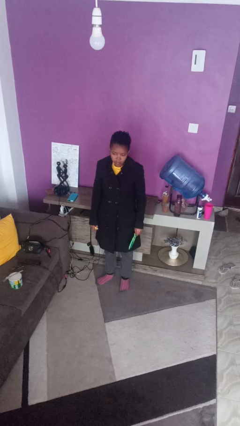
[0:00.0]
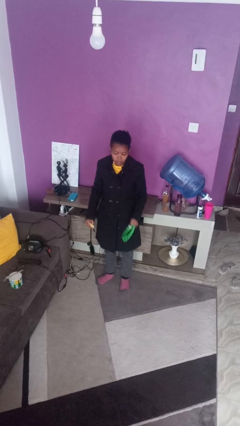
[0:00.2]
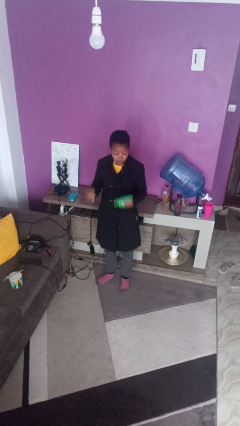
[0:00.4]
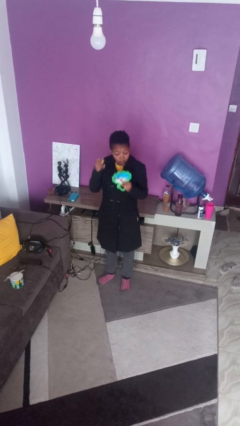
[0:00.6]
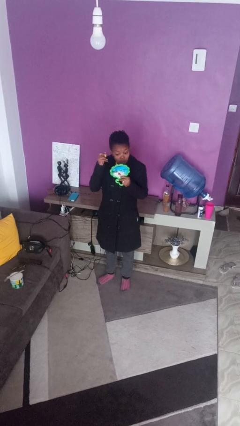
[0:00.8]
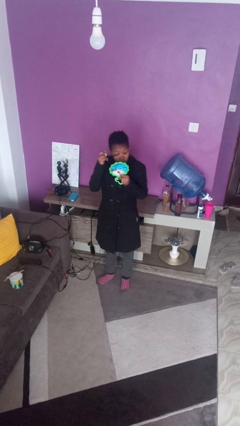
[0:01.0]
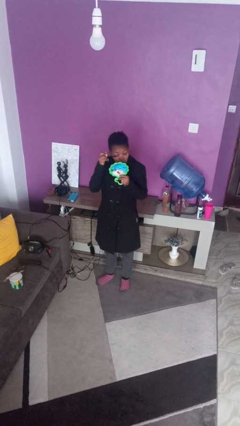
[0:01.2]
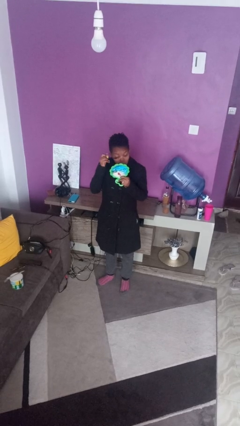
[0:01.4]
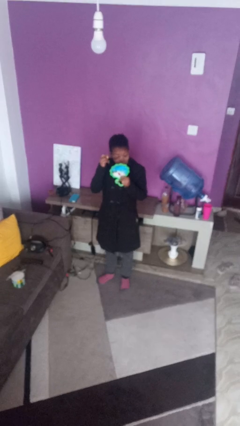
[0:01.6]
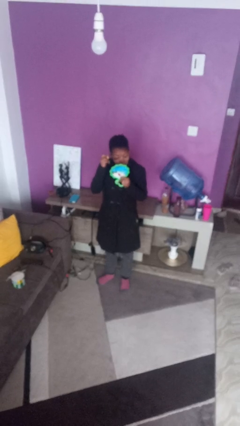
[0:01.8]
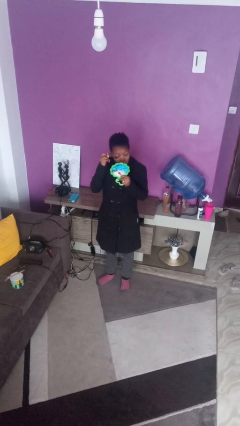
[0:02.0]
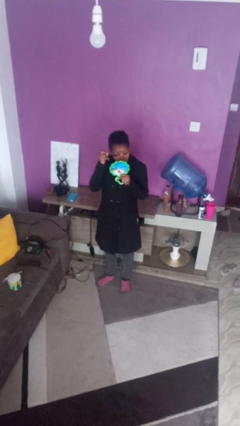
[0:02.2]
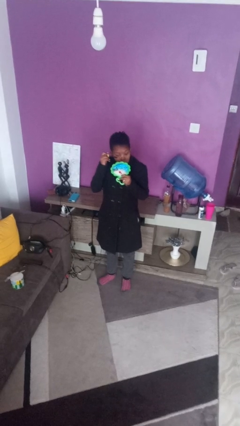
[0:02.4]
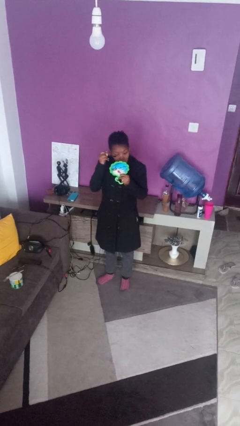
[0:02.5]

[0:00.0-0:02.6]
person applies eye makeup

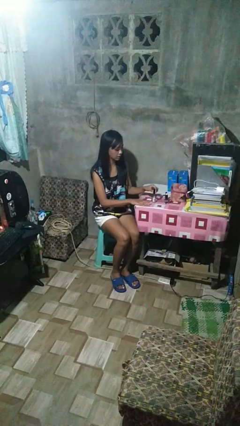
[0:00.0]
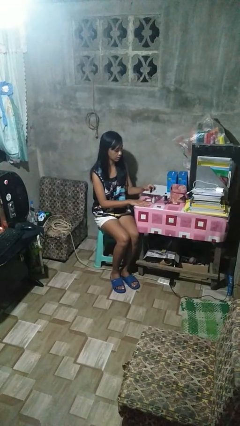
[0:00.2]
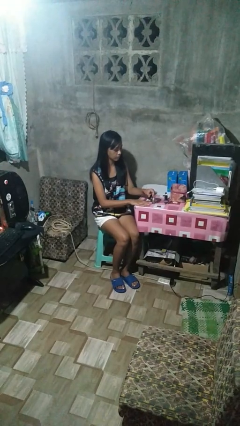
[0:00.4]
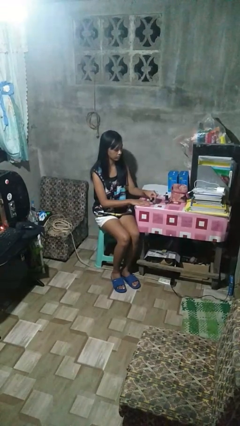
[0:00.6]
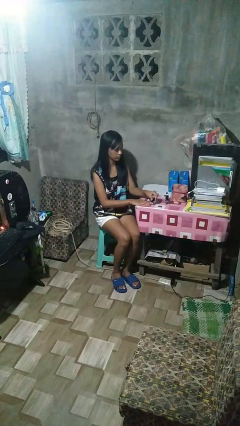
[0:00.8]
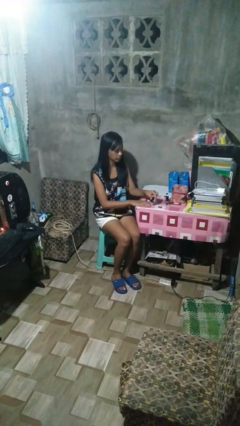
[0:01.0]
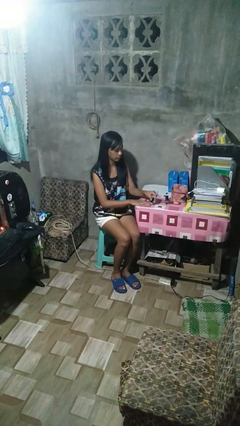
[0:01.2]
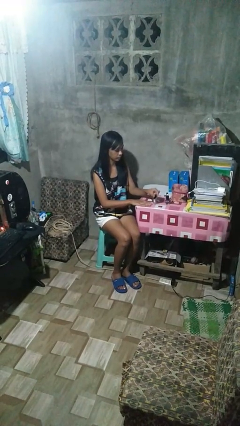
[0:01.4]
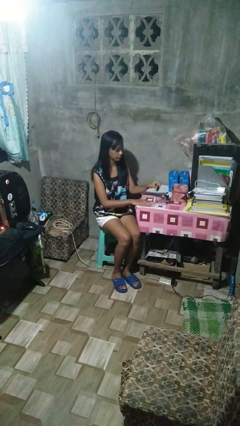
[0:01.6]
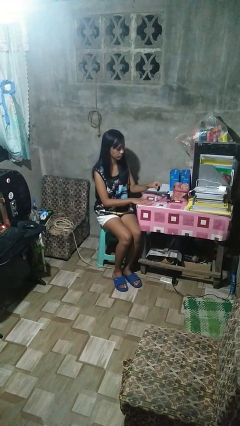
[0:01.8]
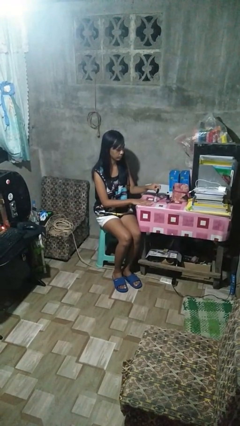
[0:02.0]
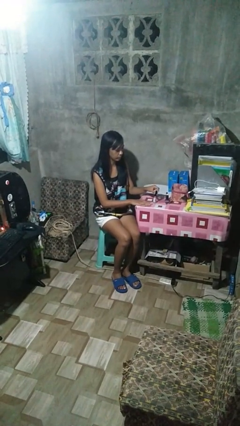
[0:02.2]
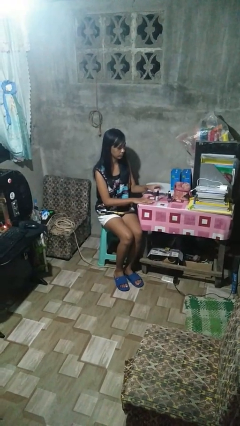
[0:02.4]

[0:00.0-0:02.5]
person paints fingernails

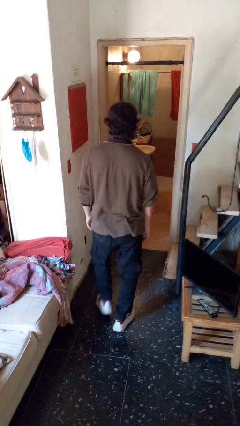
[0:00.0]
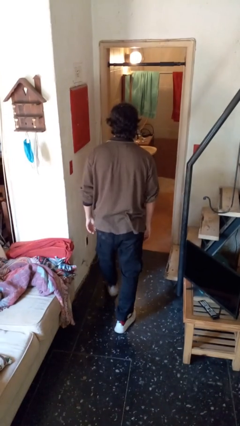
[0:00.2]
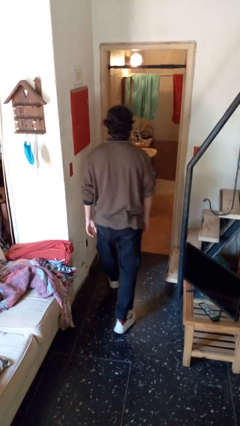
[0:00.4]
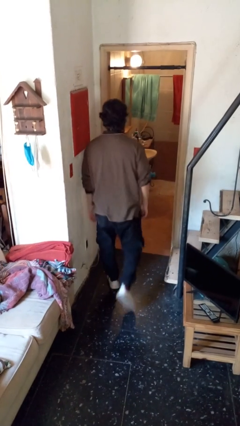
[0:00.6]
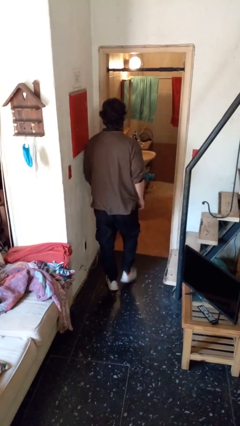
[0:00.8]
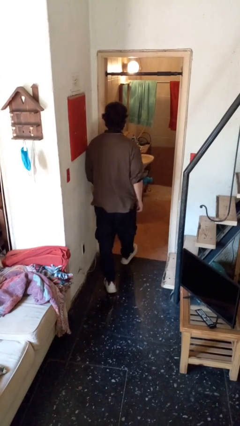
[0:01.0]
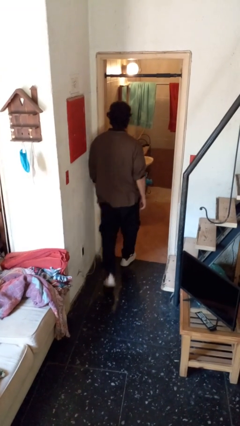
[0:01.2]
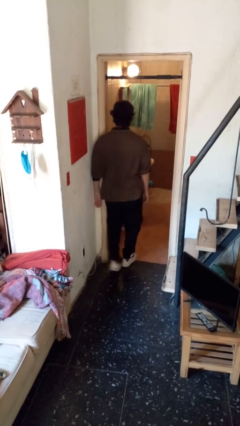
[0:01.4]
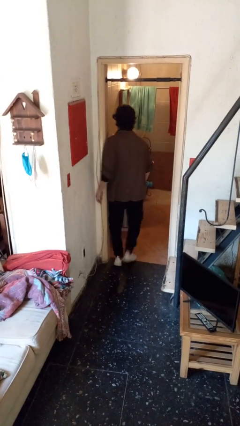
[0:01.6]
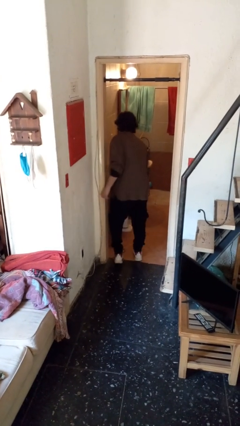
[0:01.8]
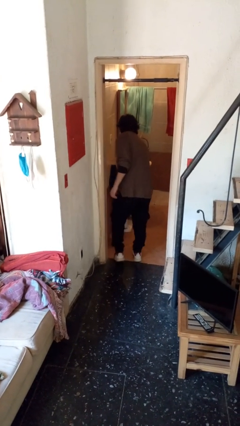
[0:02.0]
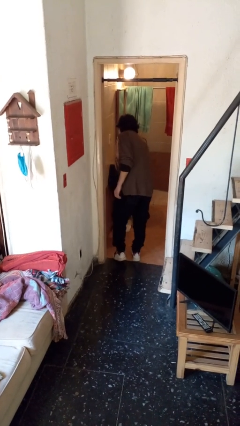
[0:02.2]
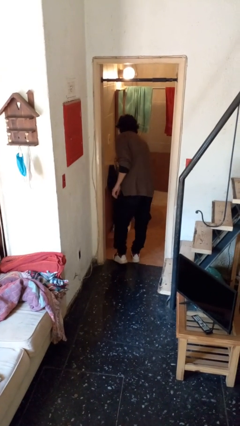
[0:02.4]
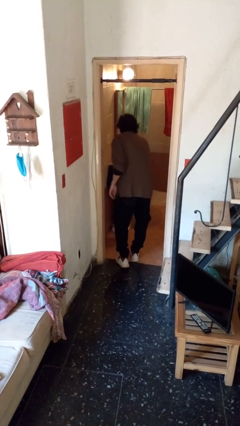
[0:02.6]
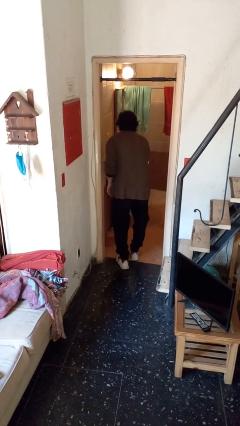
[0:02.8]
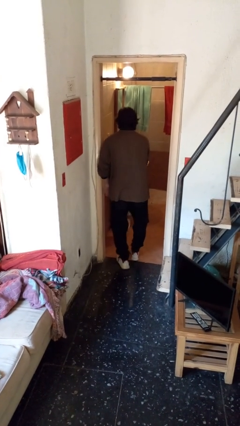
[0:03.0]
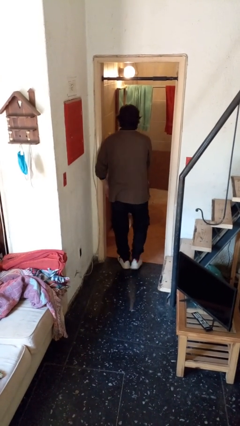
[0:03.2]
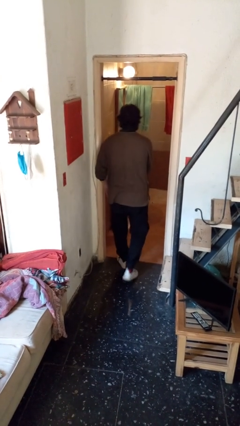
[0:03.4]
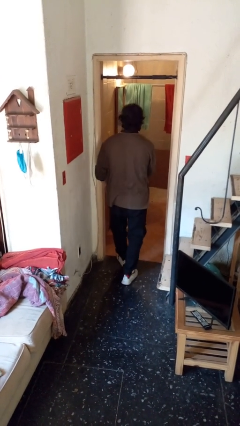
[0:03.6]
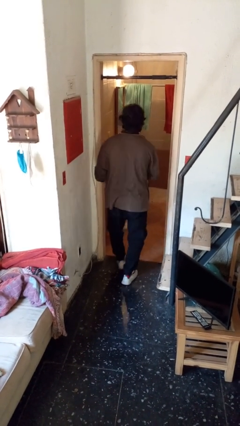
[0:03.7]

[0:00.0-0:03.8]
person bumps into wall

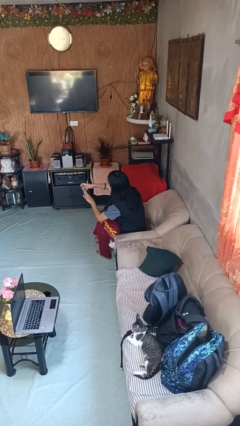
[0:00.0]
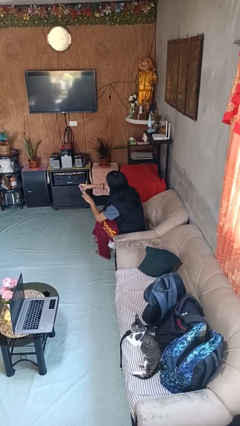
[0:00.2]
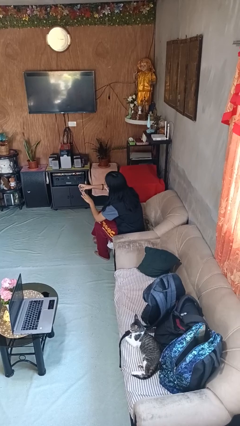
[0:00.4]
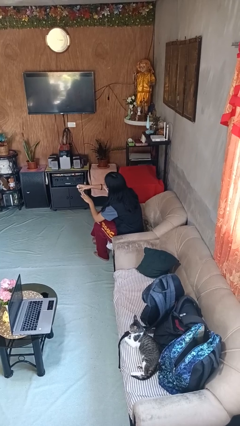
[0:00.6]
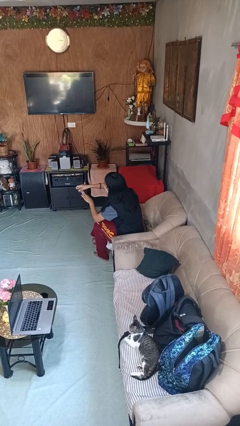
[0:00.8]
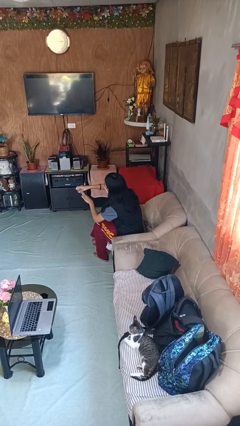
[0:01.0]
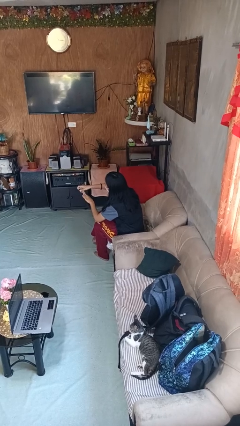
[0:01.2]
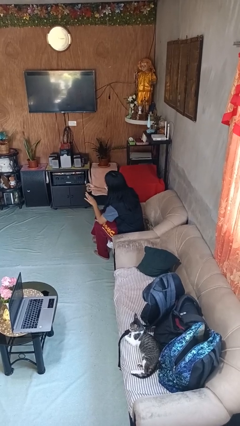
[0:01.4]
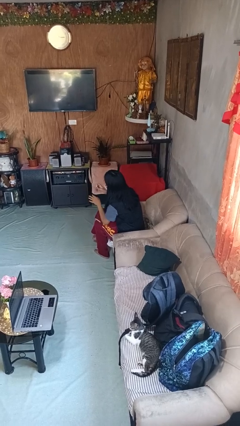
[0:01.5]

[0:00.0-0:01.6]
person clips fingernails

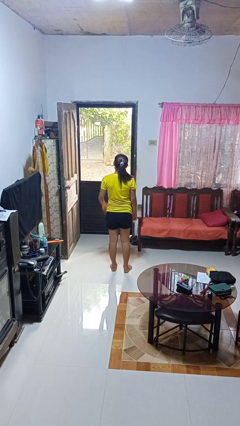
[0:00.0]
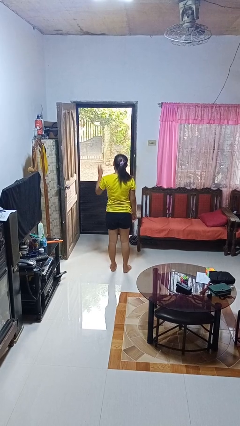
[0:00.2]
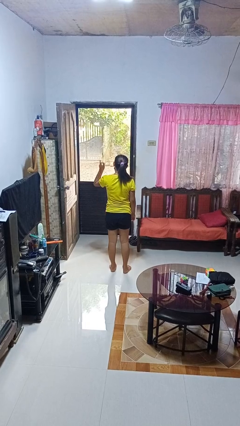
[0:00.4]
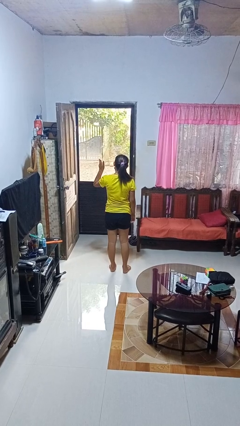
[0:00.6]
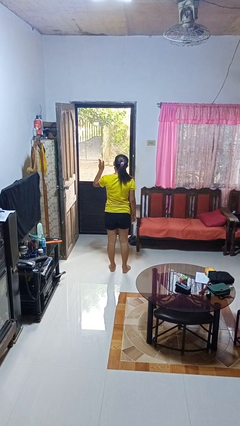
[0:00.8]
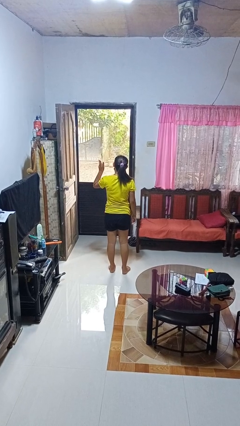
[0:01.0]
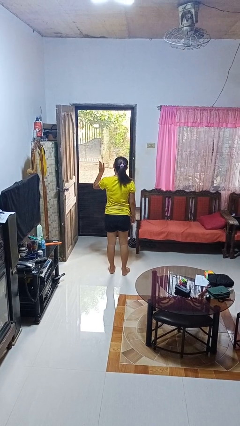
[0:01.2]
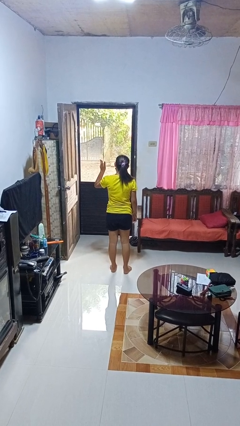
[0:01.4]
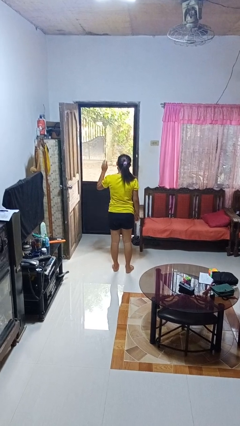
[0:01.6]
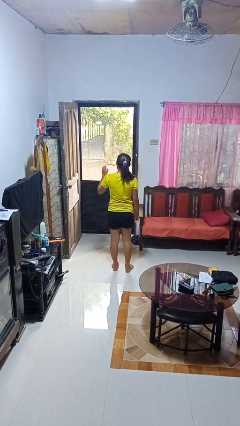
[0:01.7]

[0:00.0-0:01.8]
person gestures number three

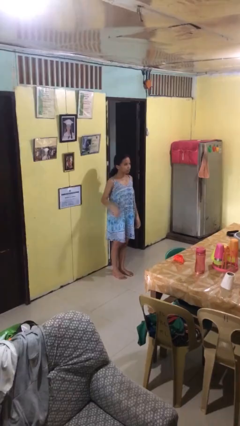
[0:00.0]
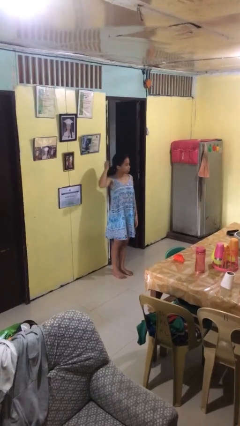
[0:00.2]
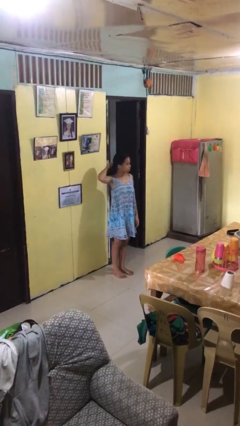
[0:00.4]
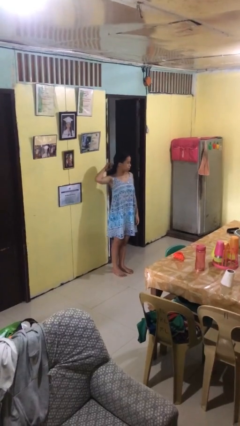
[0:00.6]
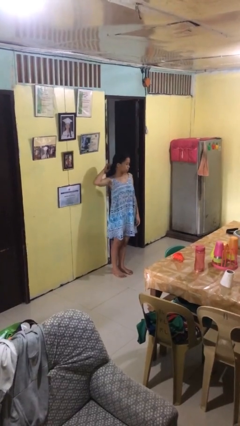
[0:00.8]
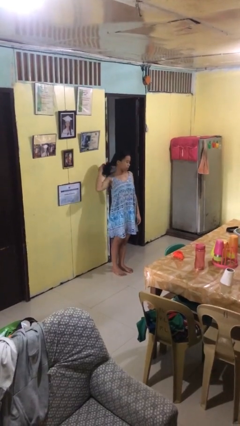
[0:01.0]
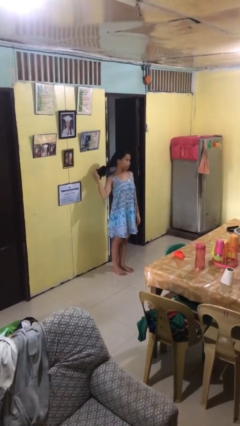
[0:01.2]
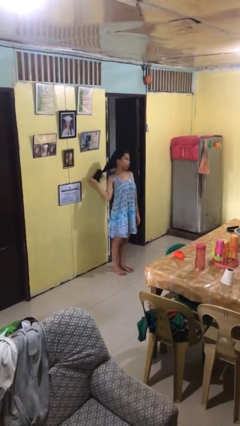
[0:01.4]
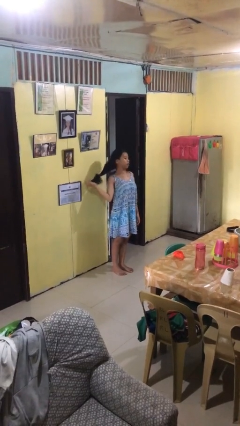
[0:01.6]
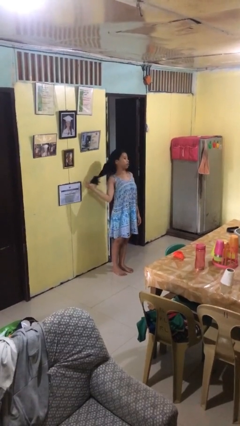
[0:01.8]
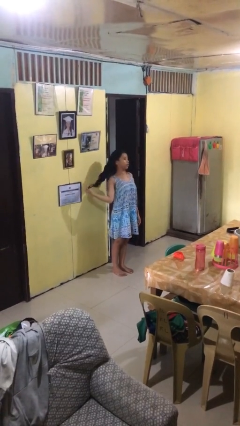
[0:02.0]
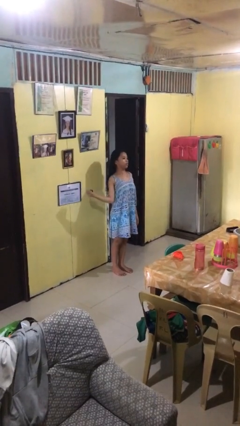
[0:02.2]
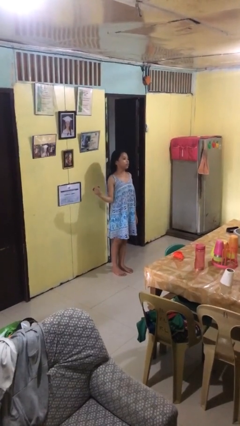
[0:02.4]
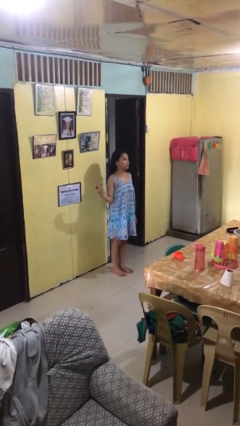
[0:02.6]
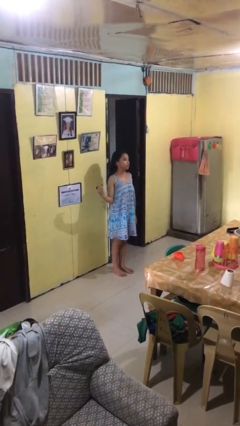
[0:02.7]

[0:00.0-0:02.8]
person takes off hairtie

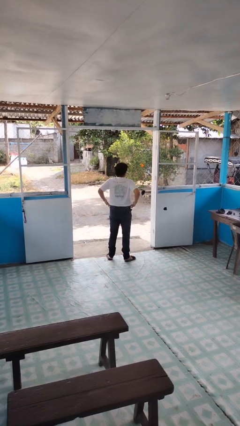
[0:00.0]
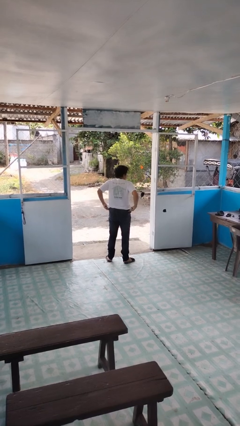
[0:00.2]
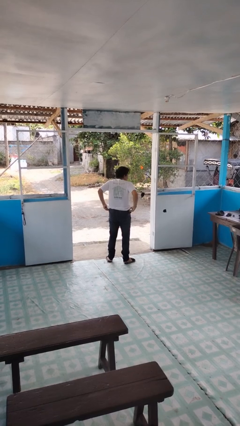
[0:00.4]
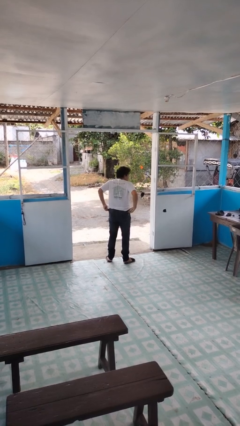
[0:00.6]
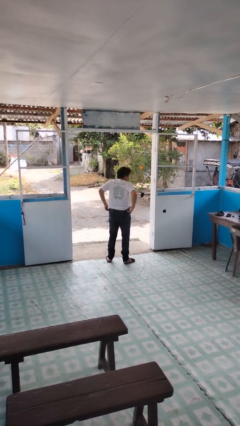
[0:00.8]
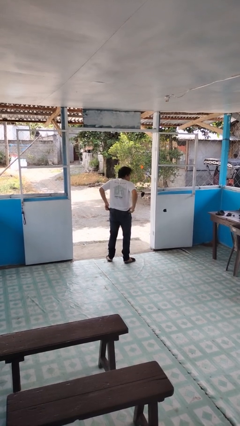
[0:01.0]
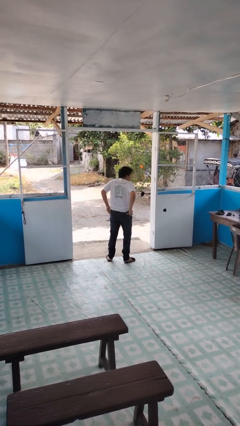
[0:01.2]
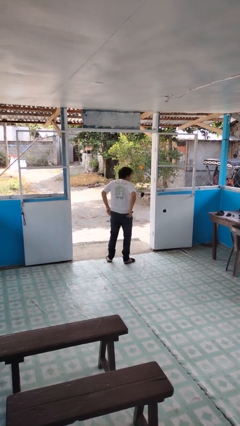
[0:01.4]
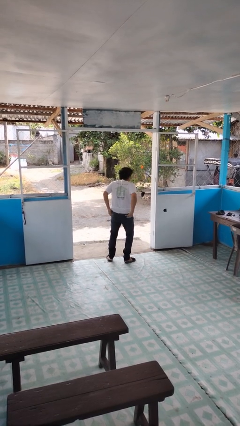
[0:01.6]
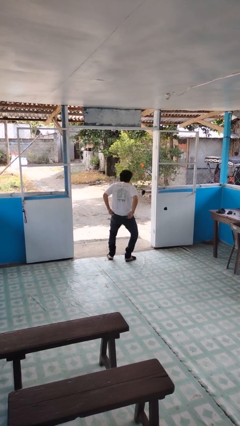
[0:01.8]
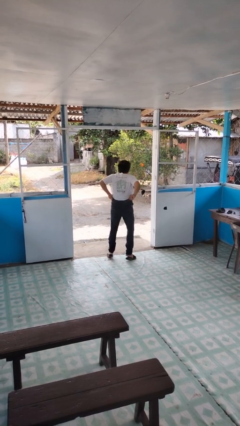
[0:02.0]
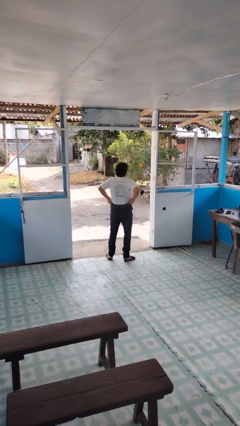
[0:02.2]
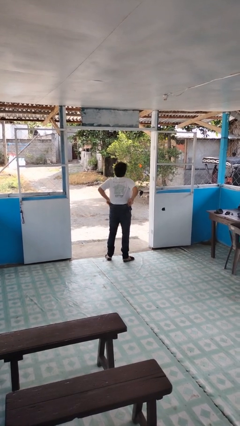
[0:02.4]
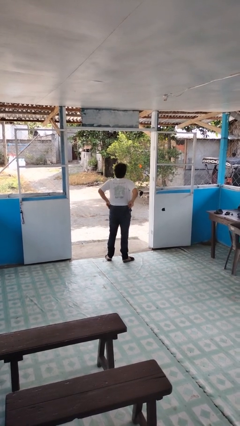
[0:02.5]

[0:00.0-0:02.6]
person hikes up pants
